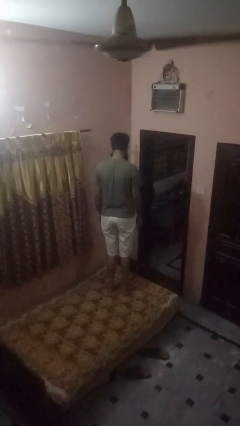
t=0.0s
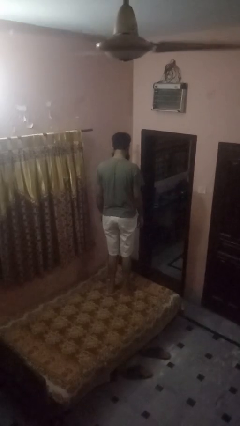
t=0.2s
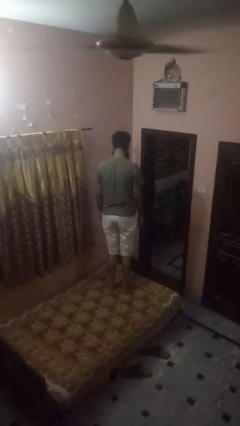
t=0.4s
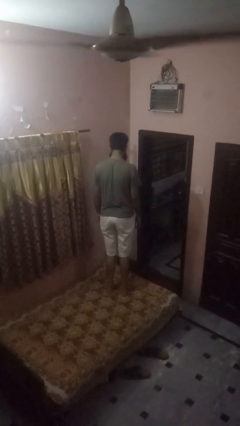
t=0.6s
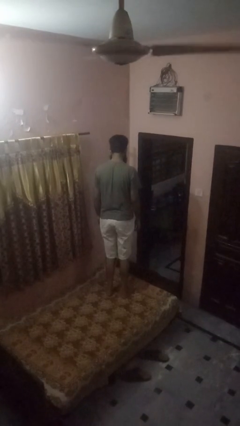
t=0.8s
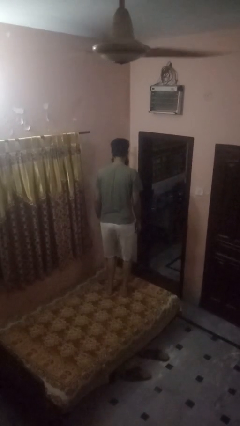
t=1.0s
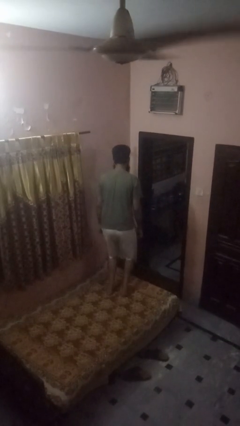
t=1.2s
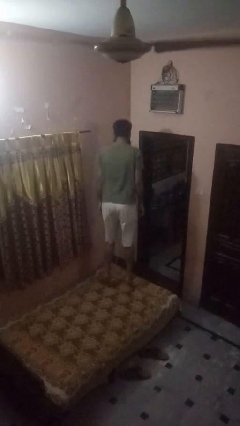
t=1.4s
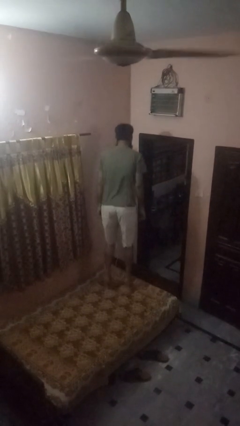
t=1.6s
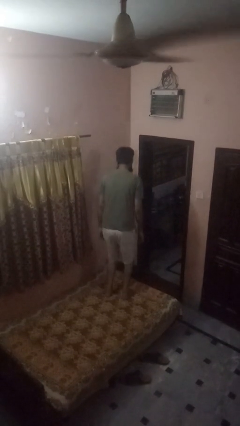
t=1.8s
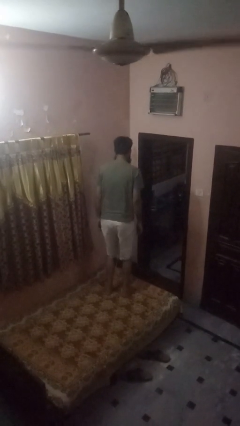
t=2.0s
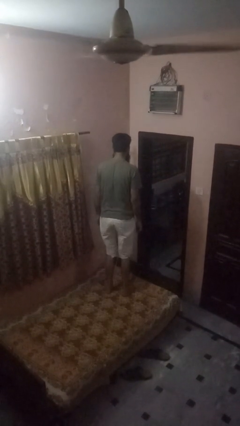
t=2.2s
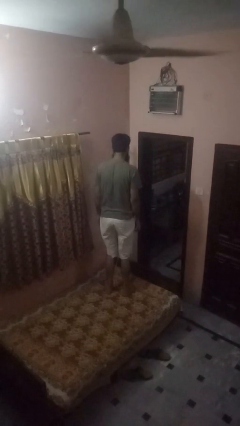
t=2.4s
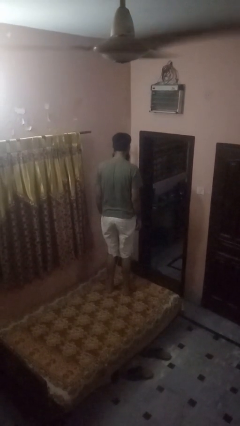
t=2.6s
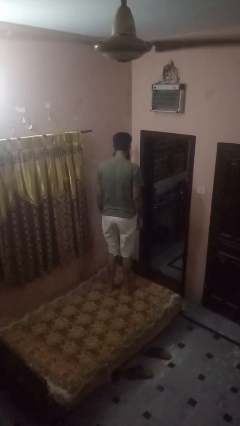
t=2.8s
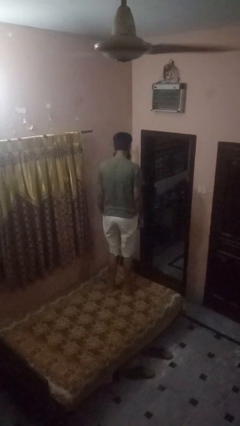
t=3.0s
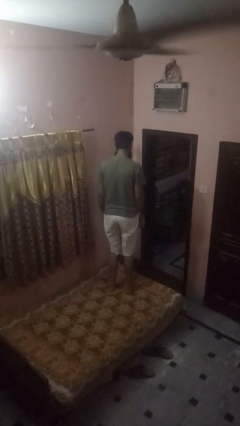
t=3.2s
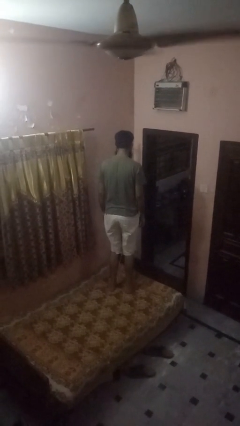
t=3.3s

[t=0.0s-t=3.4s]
person jumps on bed

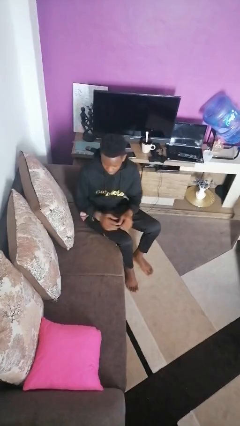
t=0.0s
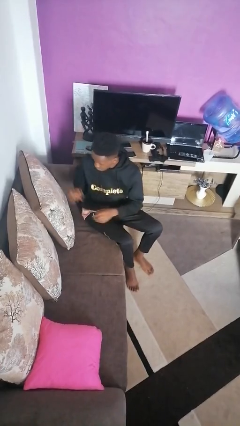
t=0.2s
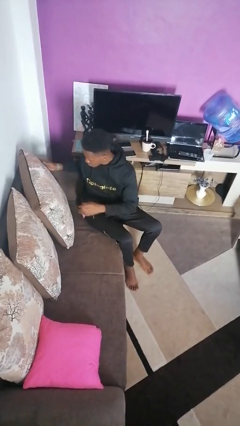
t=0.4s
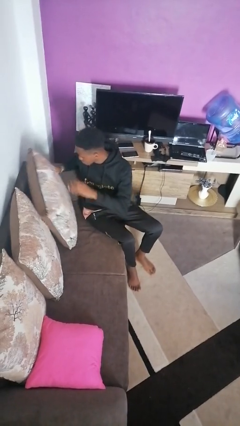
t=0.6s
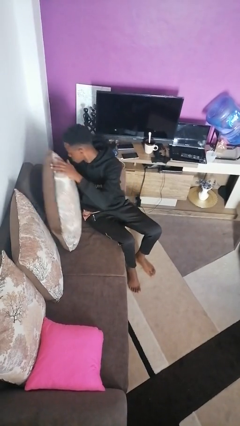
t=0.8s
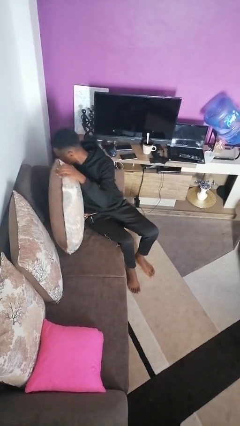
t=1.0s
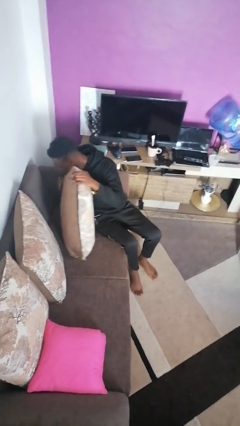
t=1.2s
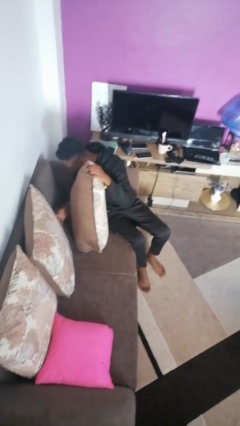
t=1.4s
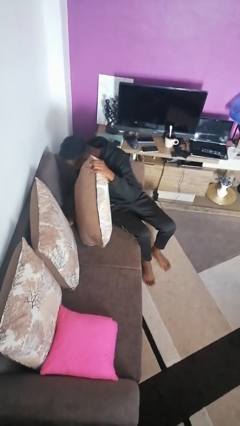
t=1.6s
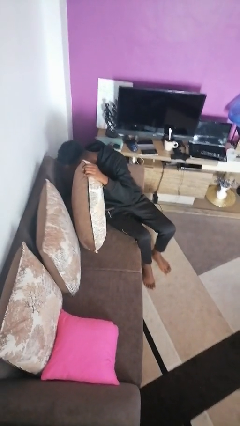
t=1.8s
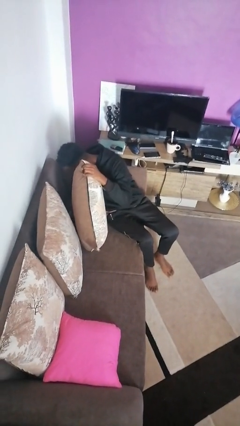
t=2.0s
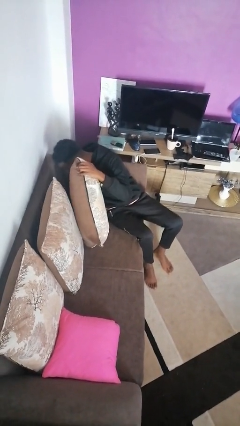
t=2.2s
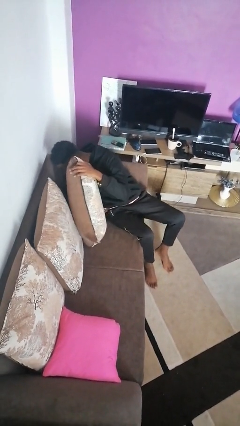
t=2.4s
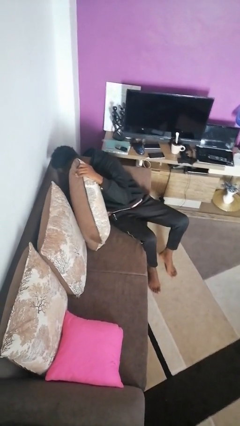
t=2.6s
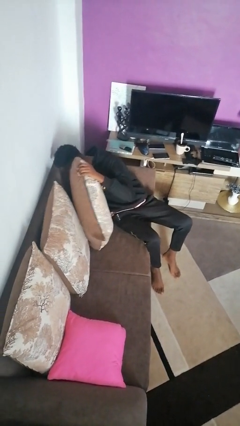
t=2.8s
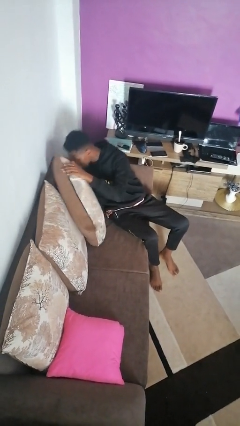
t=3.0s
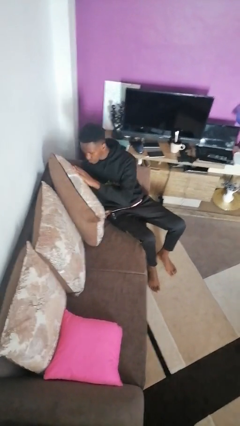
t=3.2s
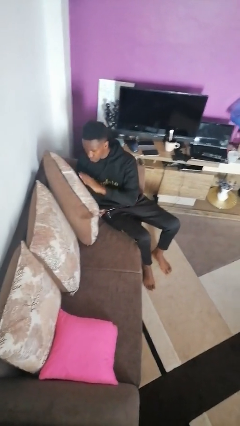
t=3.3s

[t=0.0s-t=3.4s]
person searches in couch

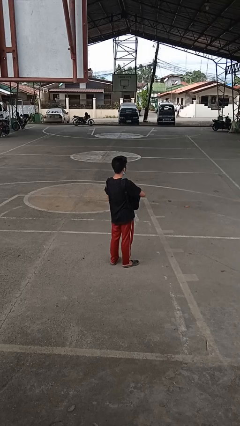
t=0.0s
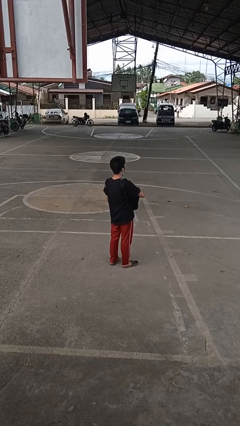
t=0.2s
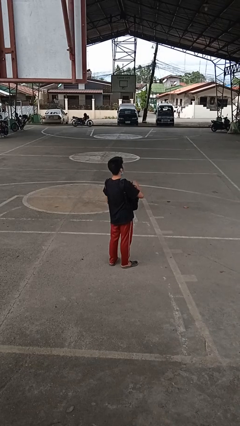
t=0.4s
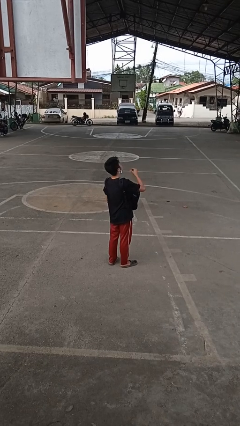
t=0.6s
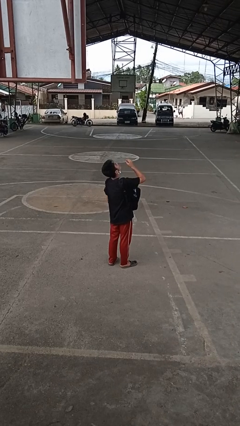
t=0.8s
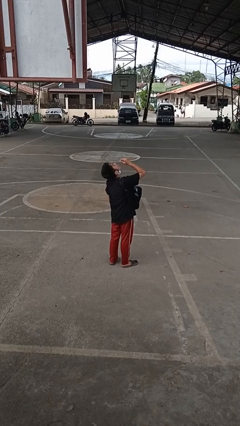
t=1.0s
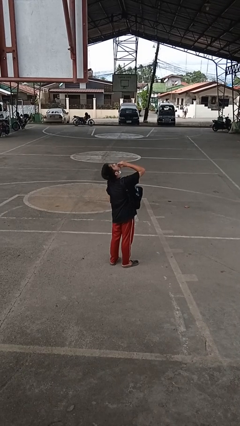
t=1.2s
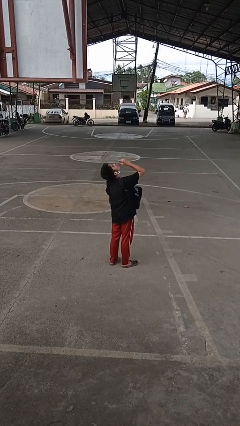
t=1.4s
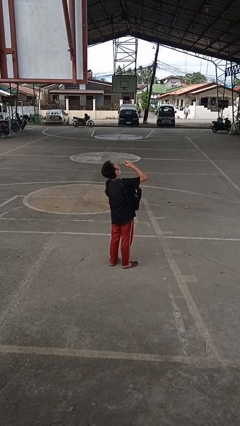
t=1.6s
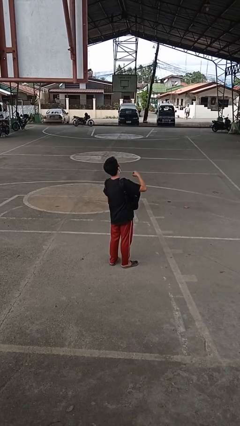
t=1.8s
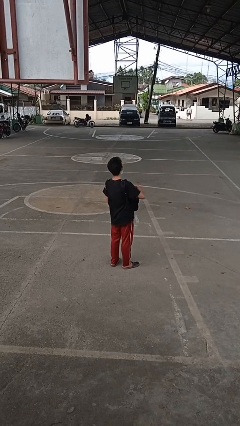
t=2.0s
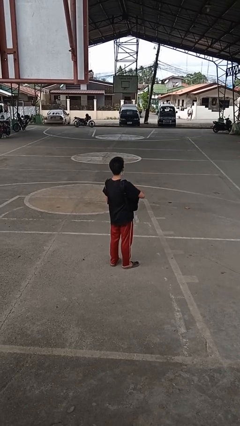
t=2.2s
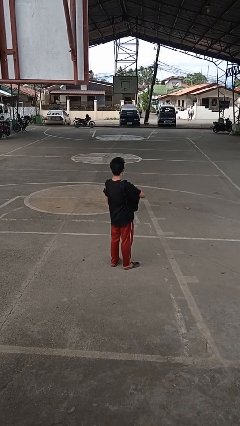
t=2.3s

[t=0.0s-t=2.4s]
person eats snack from bag

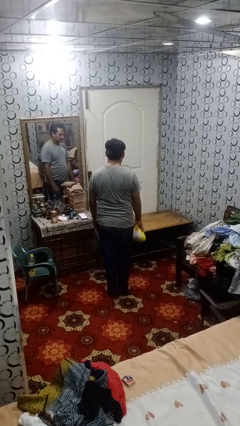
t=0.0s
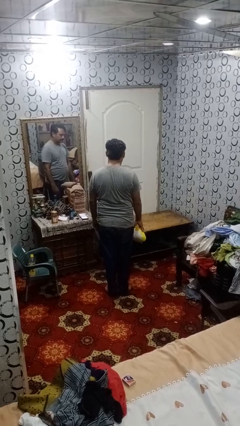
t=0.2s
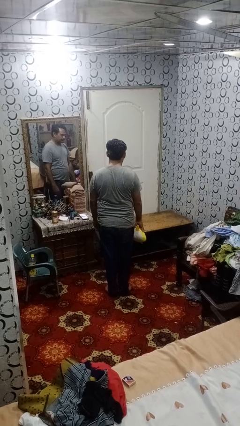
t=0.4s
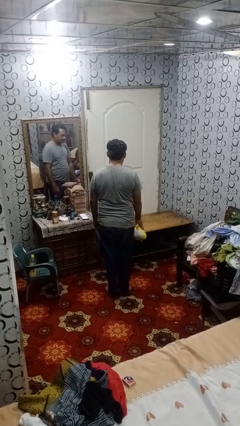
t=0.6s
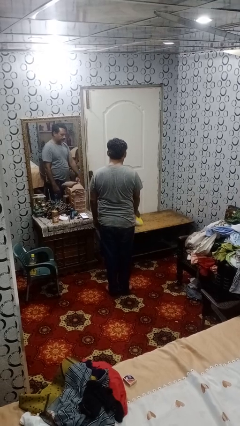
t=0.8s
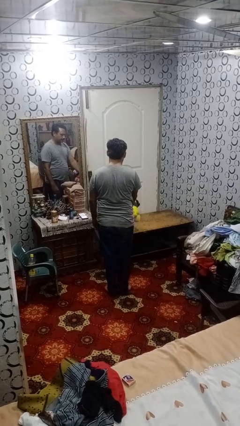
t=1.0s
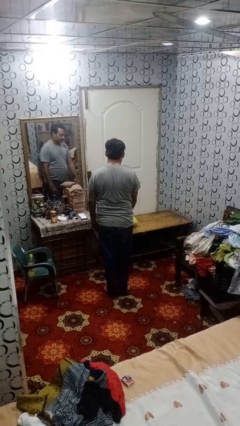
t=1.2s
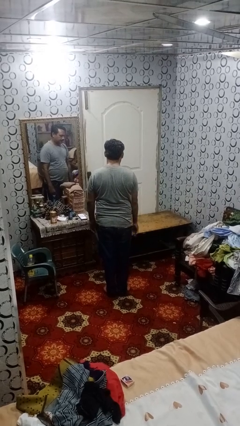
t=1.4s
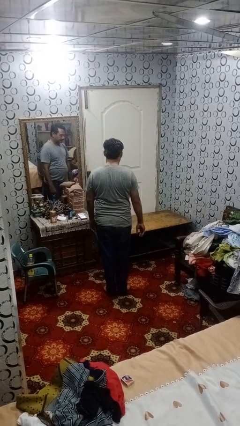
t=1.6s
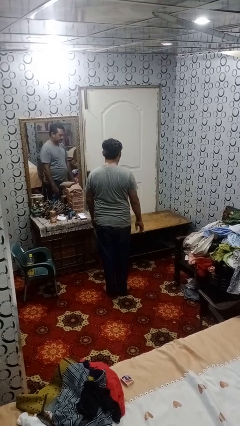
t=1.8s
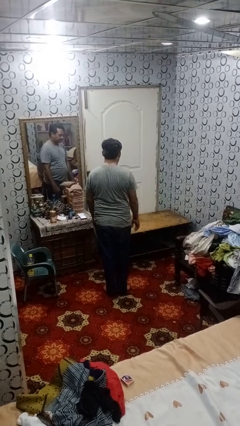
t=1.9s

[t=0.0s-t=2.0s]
person throws object on table

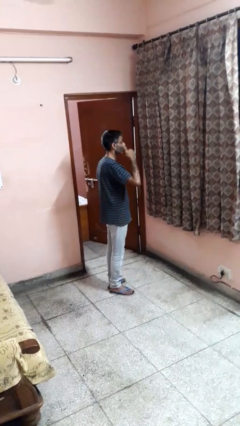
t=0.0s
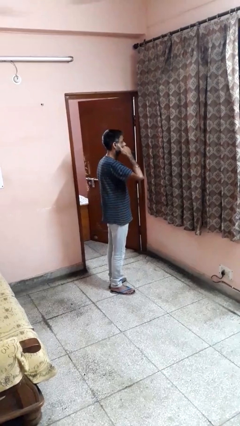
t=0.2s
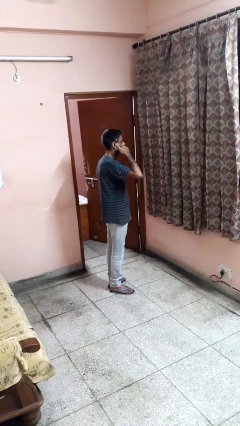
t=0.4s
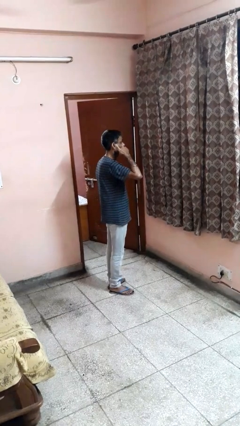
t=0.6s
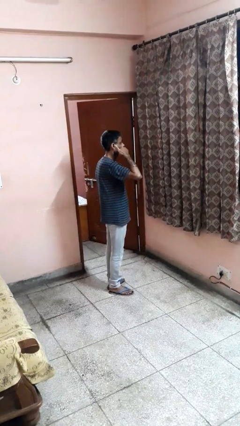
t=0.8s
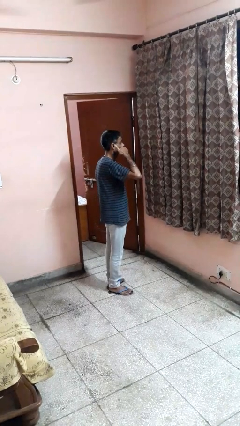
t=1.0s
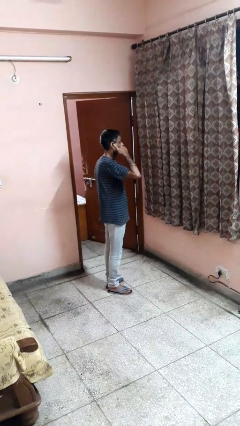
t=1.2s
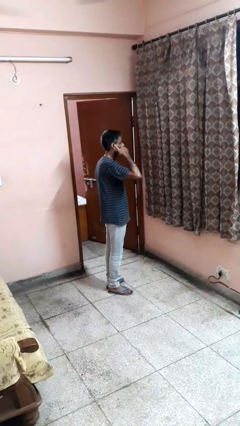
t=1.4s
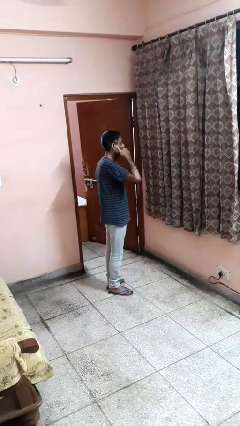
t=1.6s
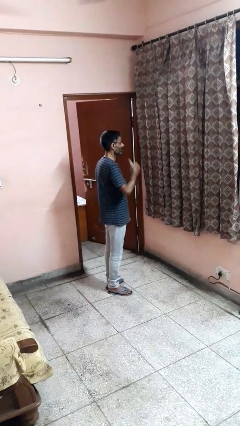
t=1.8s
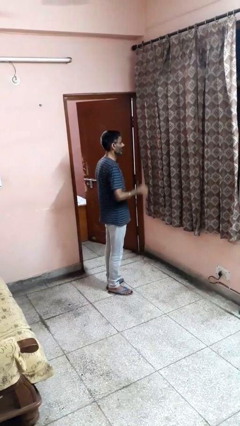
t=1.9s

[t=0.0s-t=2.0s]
person gestures call me

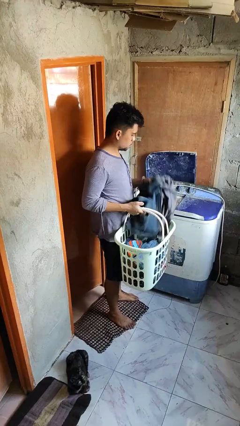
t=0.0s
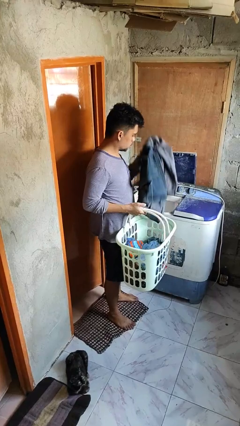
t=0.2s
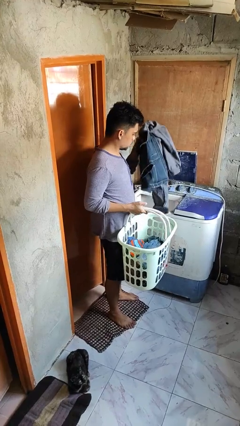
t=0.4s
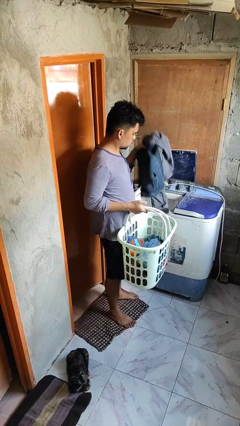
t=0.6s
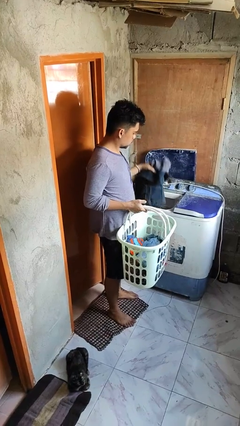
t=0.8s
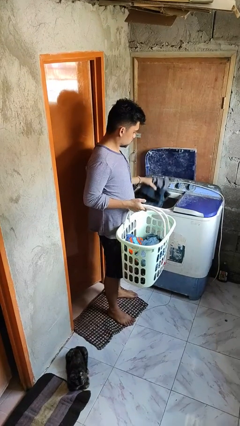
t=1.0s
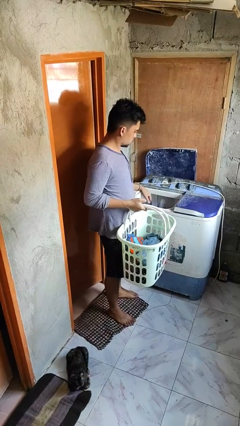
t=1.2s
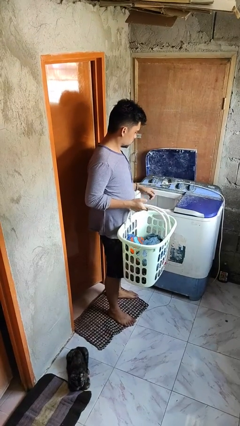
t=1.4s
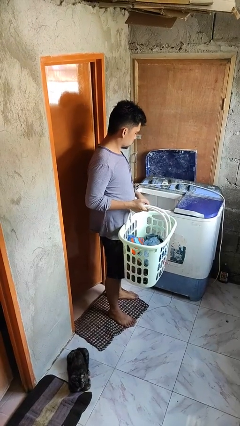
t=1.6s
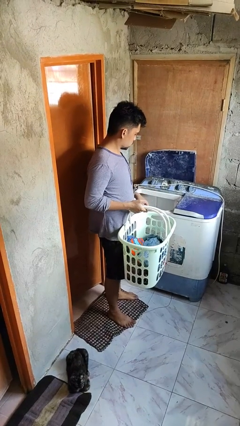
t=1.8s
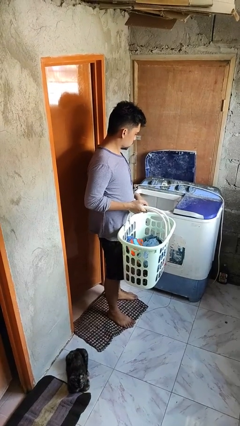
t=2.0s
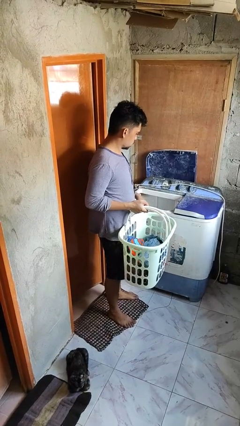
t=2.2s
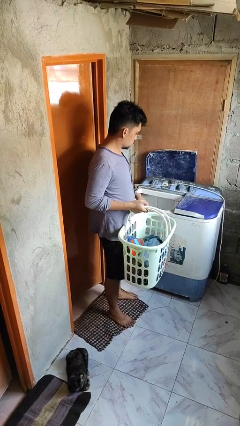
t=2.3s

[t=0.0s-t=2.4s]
person loads clotheswasher

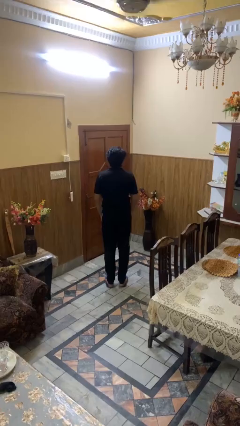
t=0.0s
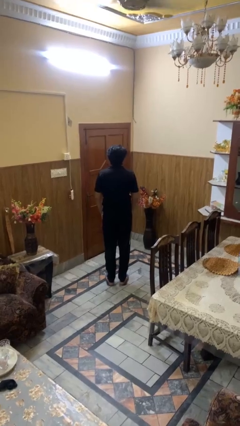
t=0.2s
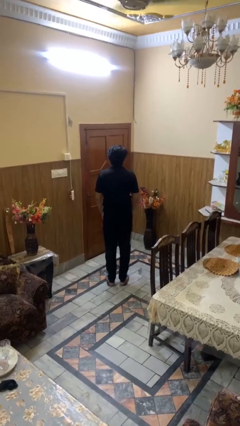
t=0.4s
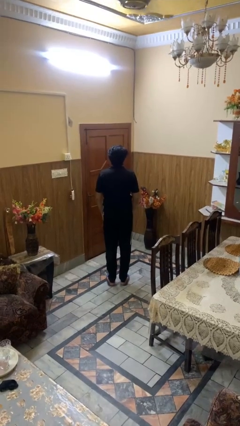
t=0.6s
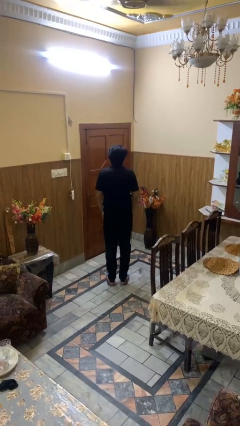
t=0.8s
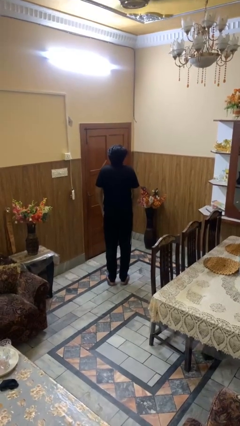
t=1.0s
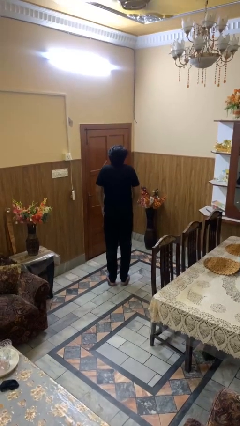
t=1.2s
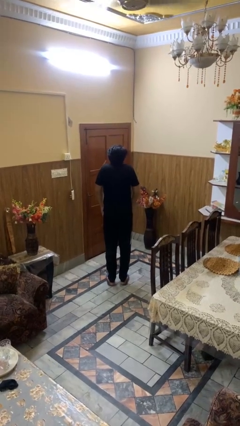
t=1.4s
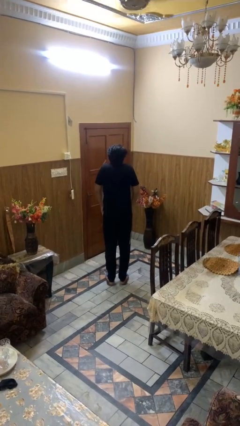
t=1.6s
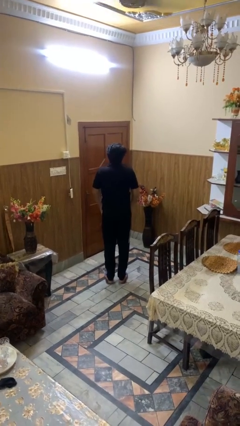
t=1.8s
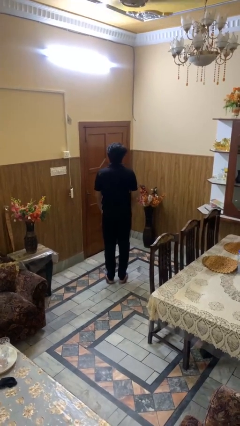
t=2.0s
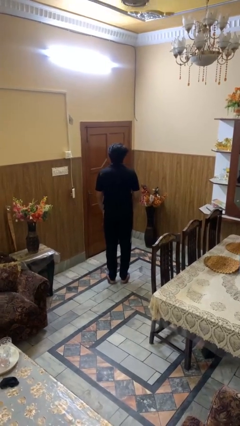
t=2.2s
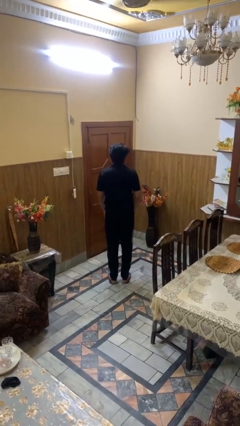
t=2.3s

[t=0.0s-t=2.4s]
person shrugs
